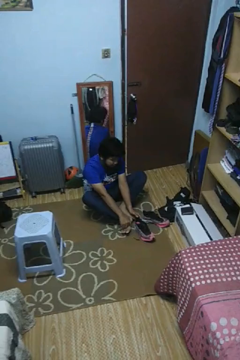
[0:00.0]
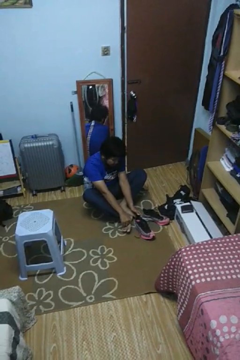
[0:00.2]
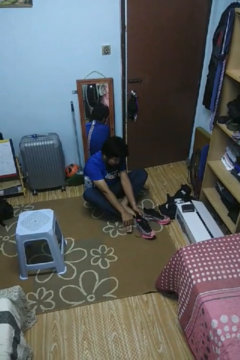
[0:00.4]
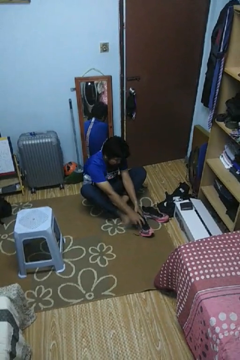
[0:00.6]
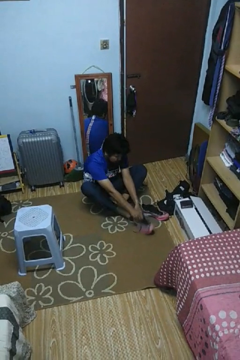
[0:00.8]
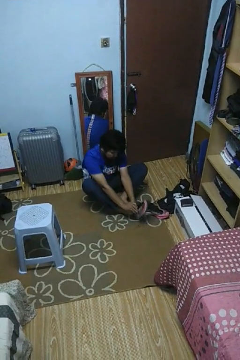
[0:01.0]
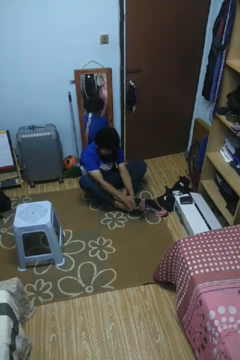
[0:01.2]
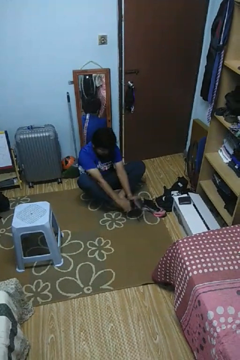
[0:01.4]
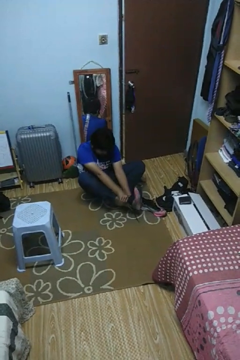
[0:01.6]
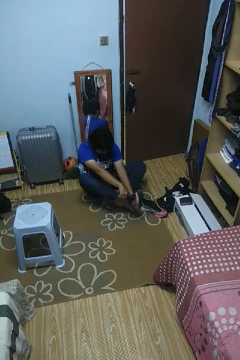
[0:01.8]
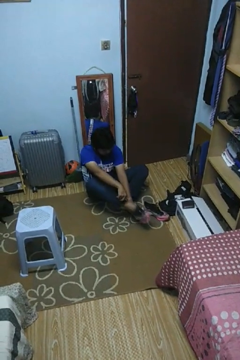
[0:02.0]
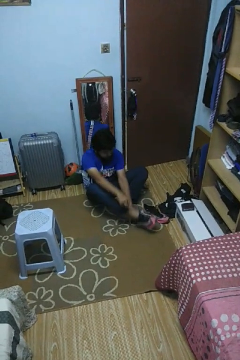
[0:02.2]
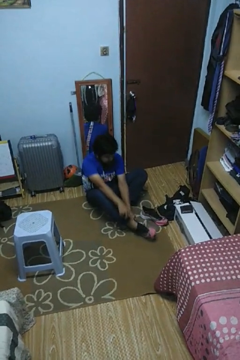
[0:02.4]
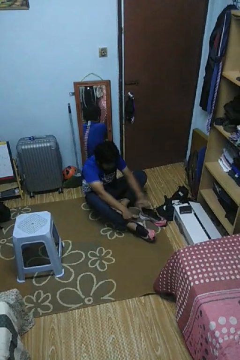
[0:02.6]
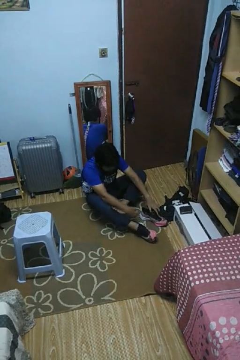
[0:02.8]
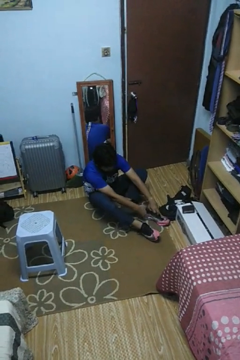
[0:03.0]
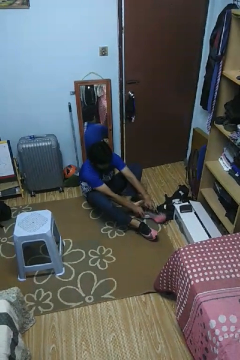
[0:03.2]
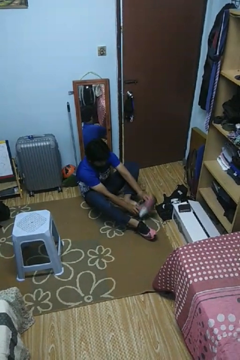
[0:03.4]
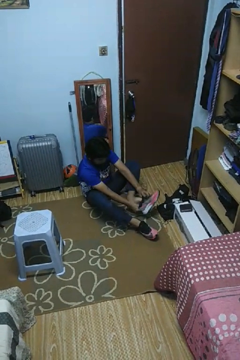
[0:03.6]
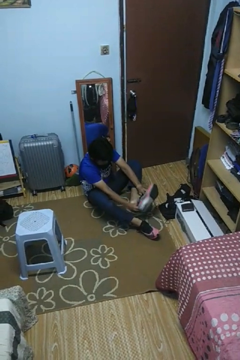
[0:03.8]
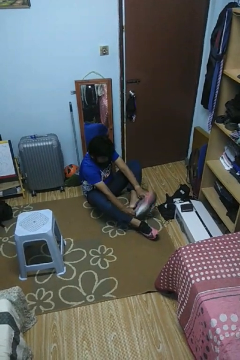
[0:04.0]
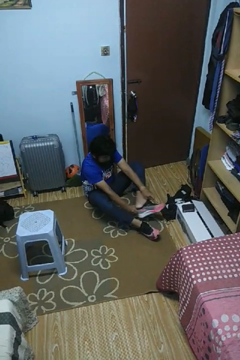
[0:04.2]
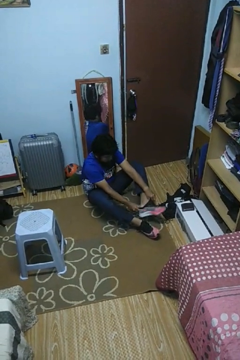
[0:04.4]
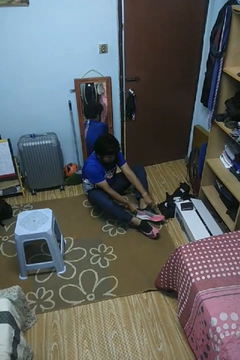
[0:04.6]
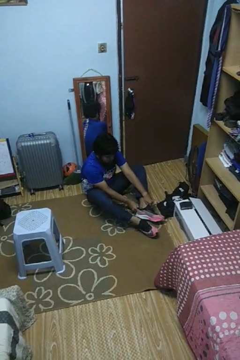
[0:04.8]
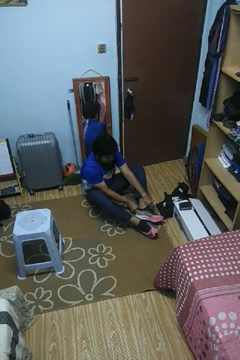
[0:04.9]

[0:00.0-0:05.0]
person puts on shoes

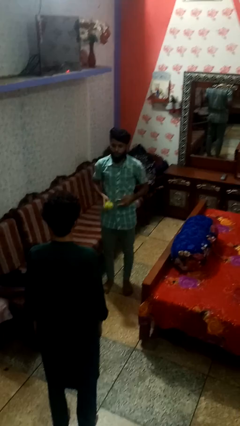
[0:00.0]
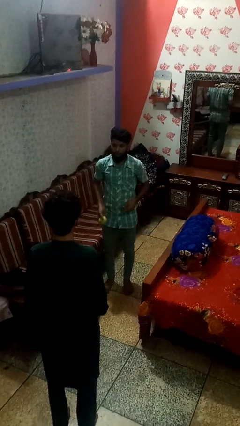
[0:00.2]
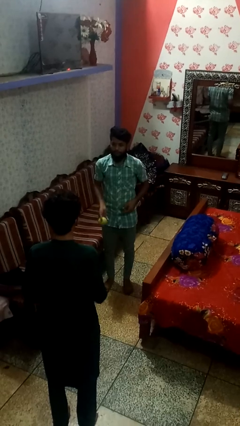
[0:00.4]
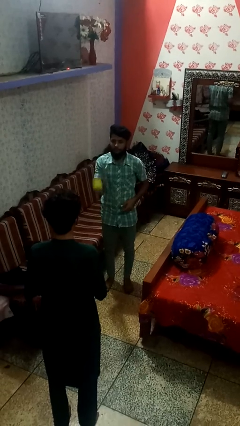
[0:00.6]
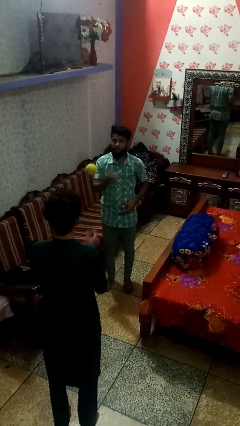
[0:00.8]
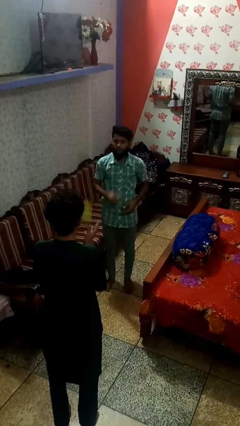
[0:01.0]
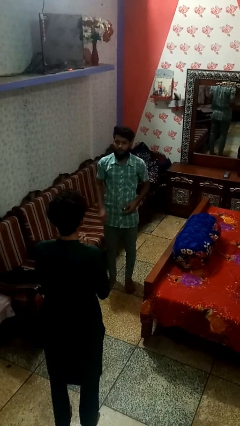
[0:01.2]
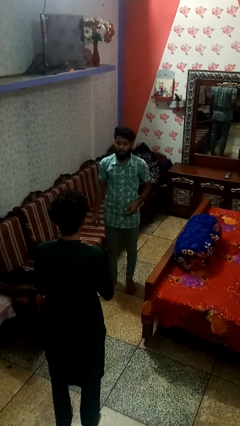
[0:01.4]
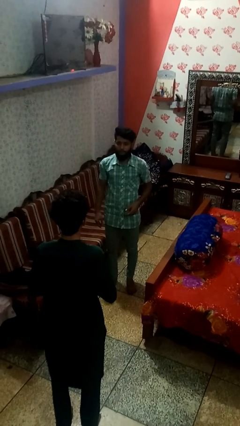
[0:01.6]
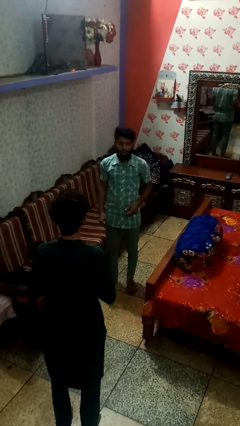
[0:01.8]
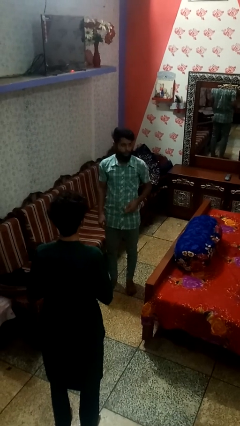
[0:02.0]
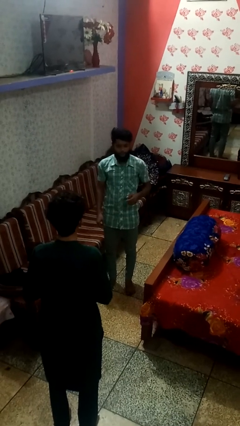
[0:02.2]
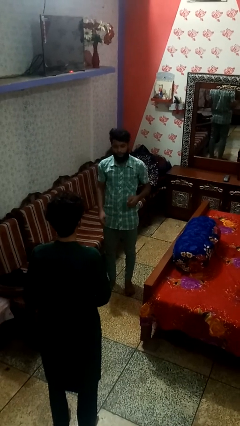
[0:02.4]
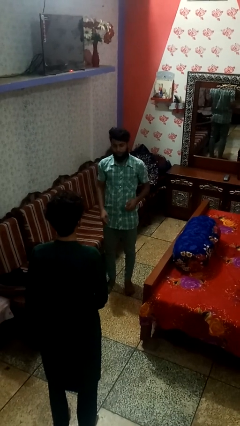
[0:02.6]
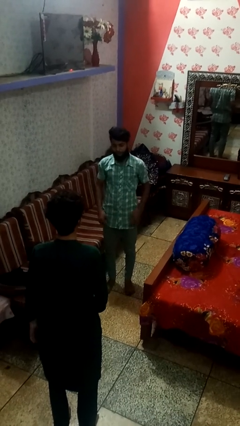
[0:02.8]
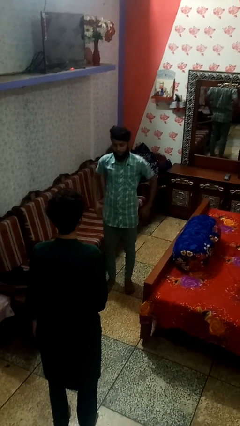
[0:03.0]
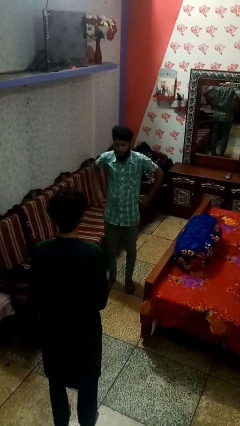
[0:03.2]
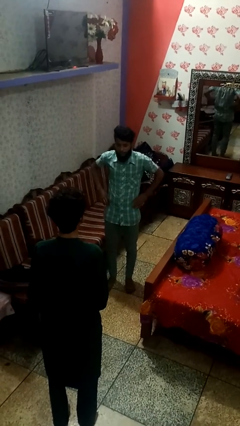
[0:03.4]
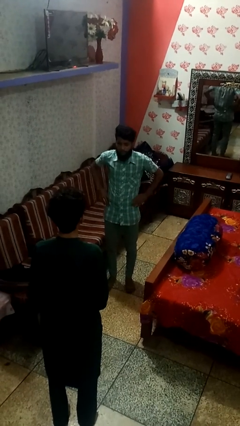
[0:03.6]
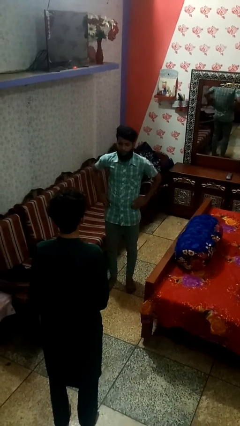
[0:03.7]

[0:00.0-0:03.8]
person throws object to person

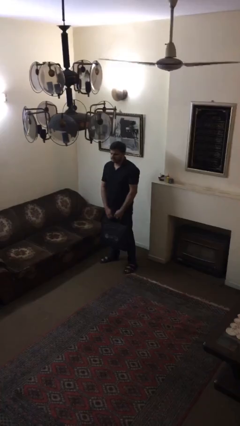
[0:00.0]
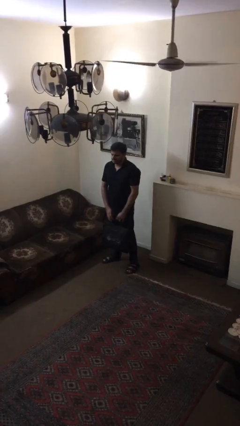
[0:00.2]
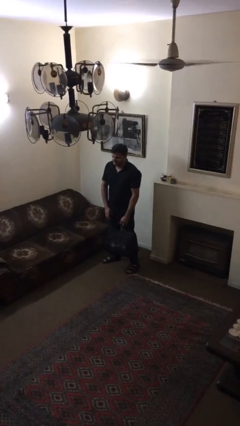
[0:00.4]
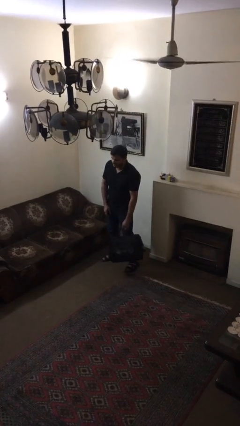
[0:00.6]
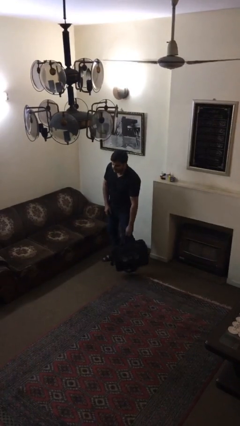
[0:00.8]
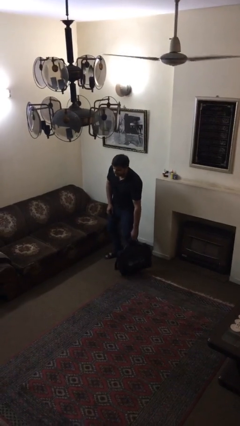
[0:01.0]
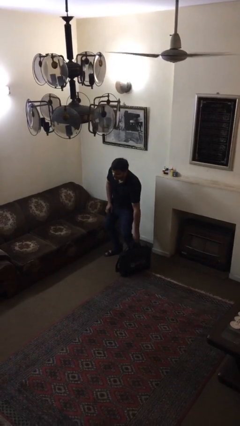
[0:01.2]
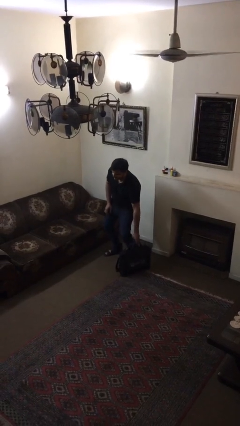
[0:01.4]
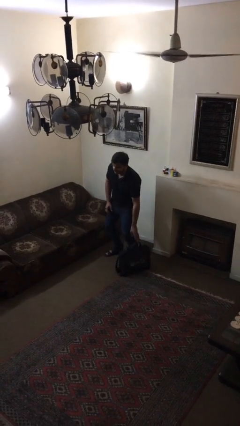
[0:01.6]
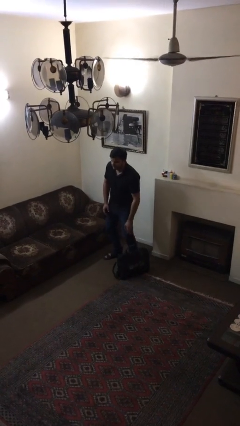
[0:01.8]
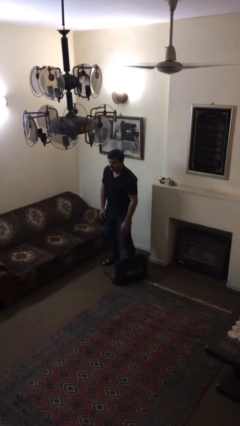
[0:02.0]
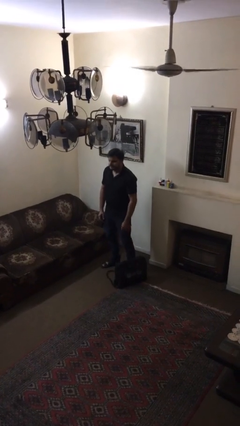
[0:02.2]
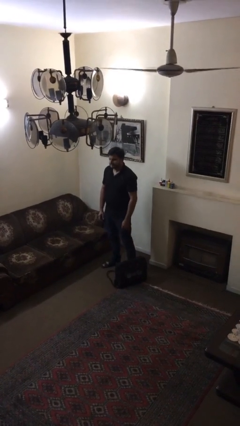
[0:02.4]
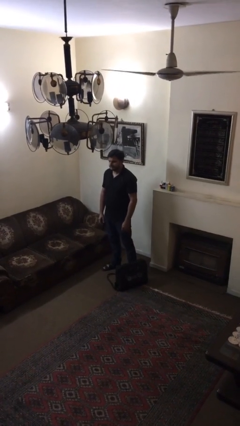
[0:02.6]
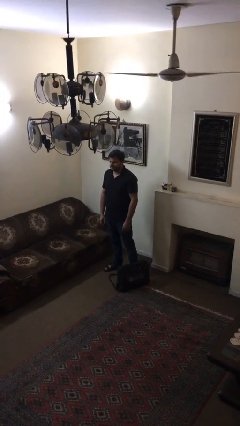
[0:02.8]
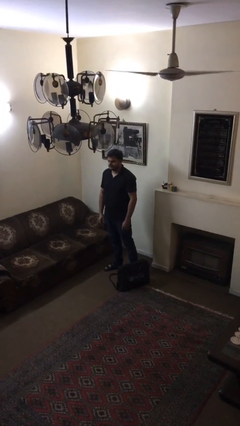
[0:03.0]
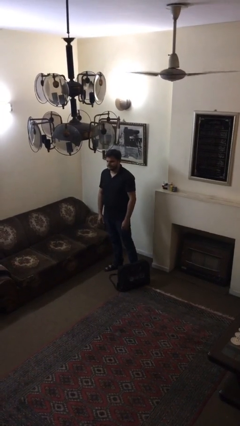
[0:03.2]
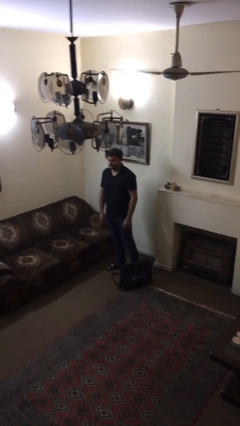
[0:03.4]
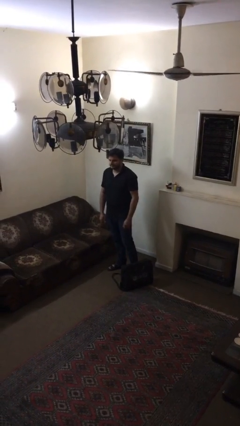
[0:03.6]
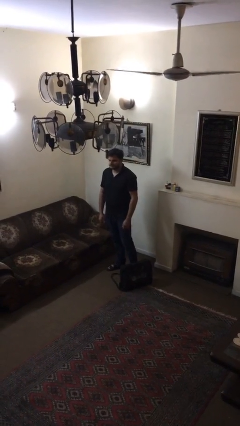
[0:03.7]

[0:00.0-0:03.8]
person puts down object on floor

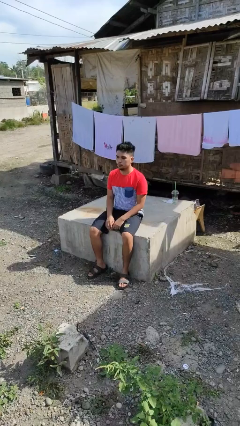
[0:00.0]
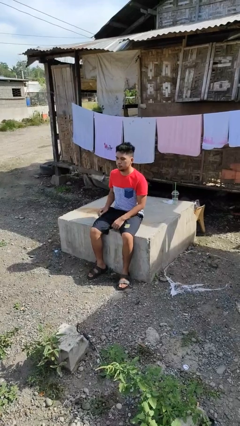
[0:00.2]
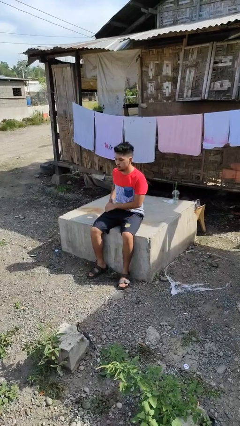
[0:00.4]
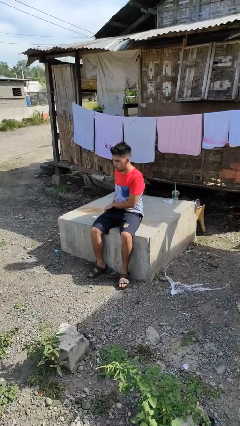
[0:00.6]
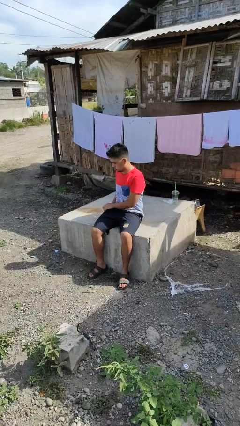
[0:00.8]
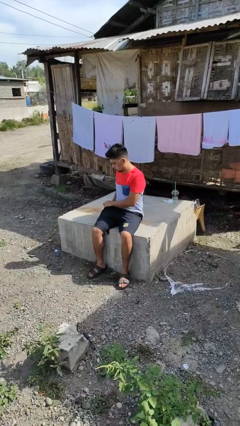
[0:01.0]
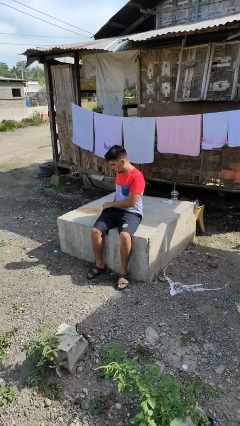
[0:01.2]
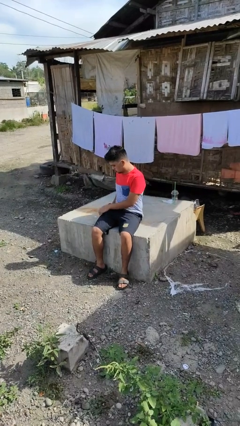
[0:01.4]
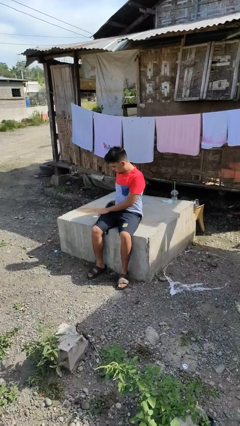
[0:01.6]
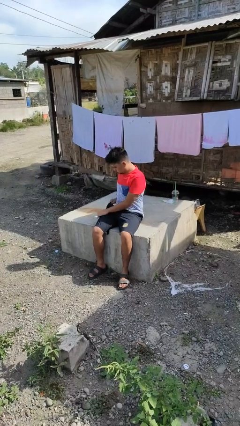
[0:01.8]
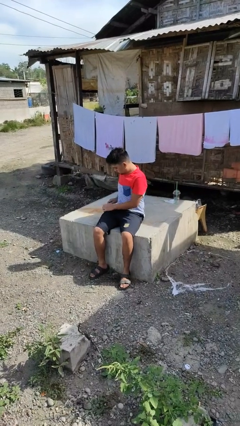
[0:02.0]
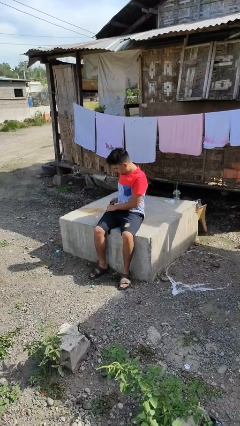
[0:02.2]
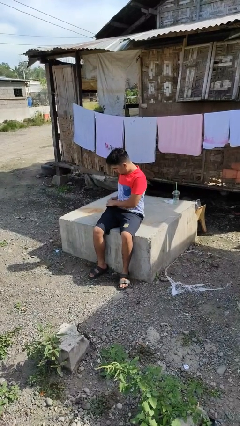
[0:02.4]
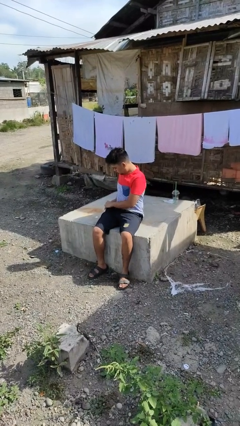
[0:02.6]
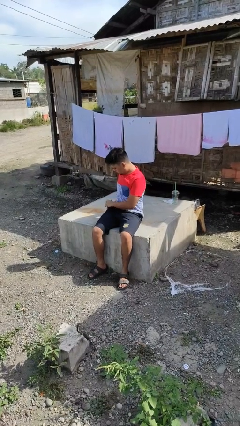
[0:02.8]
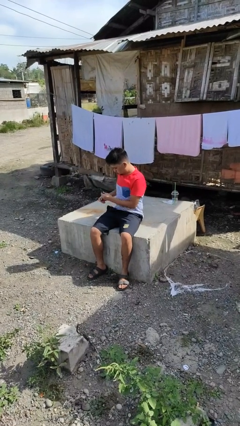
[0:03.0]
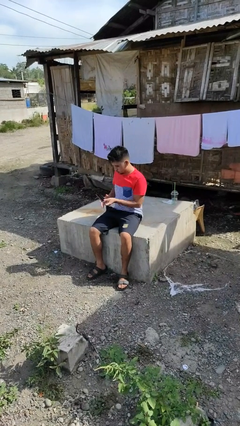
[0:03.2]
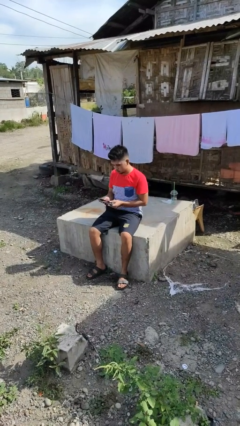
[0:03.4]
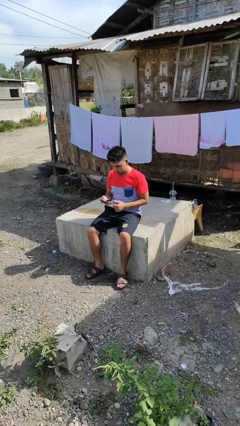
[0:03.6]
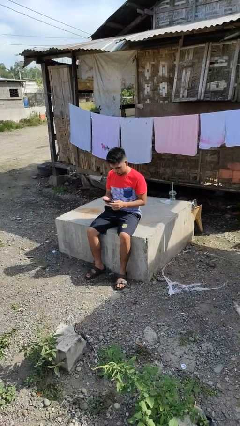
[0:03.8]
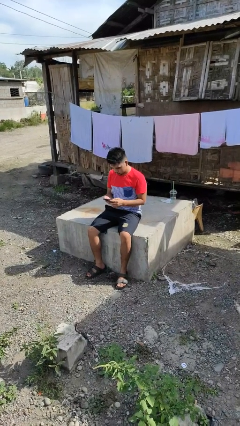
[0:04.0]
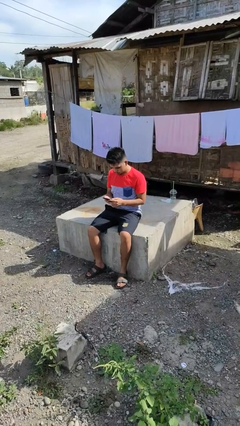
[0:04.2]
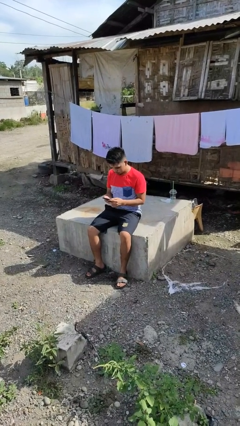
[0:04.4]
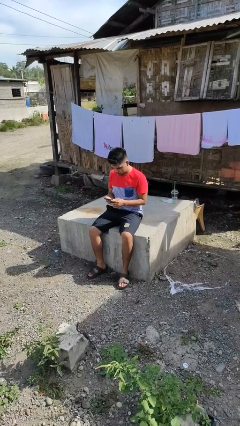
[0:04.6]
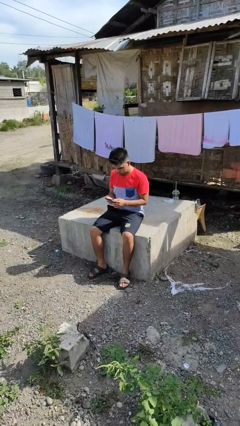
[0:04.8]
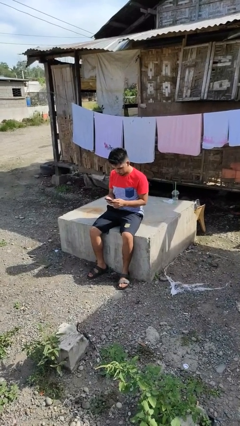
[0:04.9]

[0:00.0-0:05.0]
person takes phone from pocket

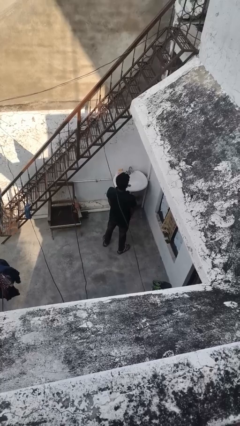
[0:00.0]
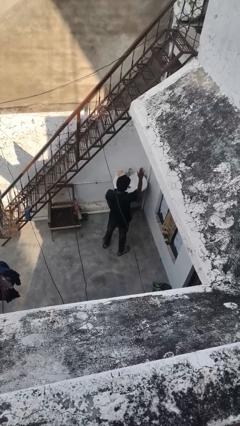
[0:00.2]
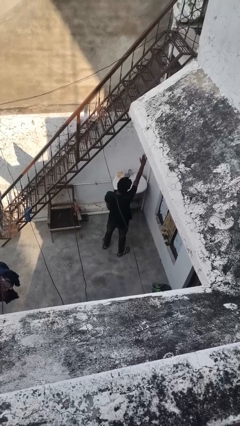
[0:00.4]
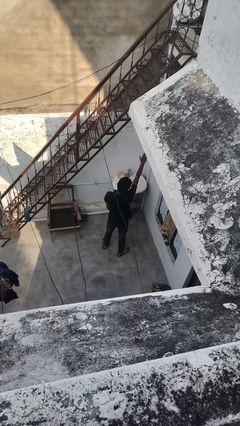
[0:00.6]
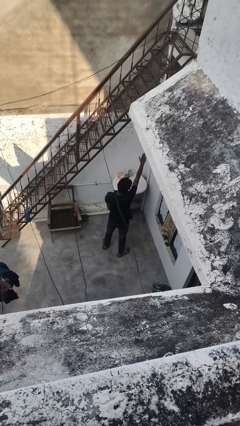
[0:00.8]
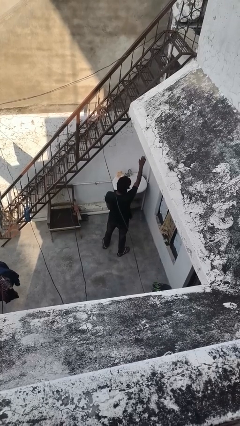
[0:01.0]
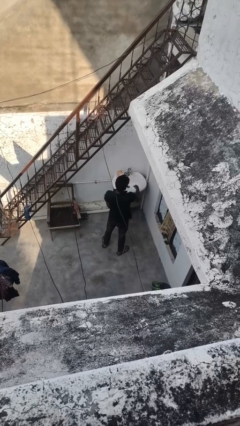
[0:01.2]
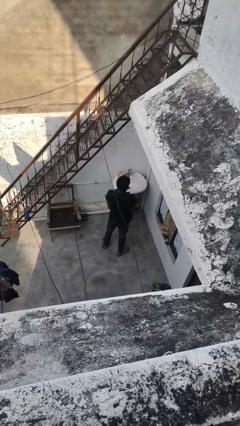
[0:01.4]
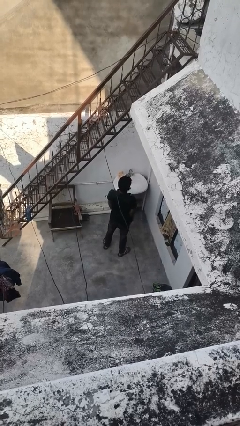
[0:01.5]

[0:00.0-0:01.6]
person gestures stop
